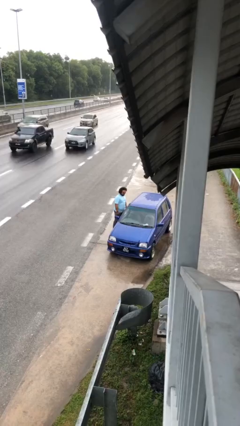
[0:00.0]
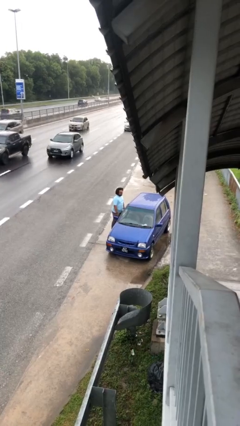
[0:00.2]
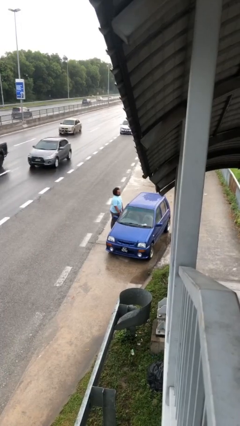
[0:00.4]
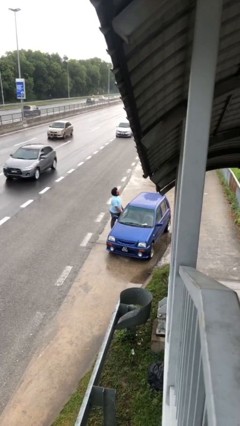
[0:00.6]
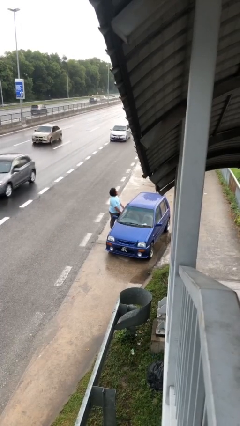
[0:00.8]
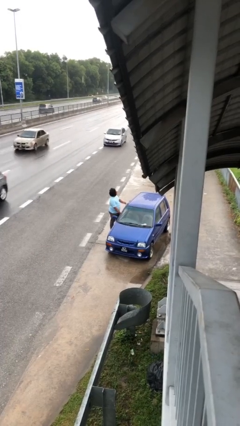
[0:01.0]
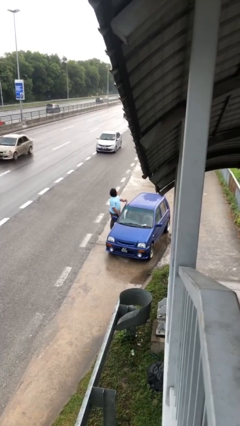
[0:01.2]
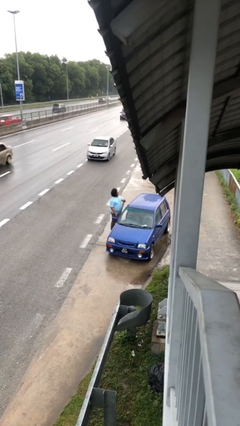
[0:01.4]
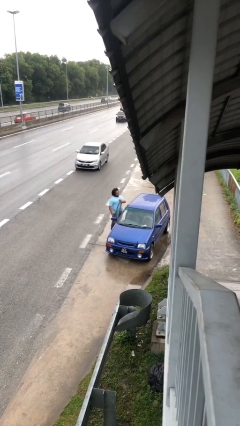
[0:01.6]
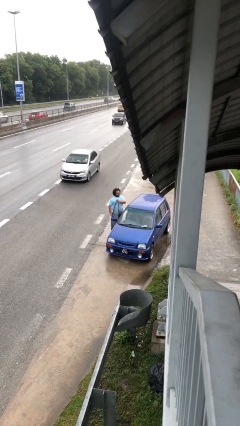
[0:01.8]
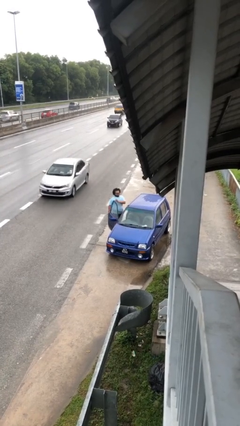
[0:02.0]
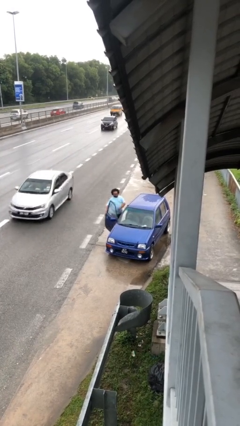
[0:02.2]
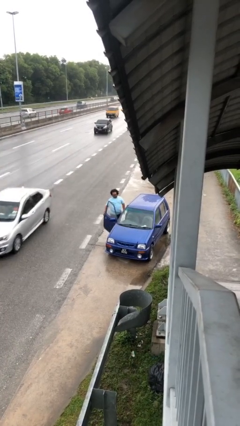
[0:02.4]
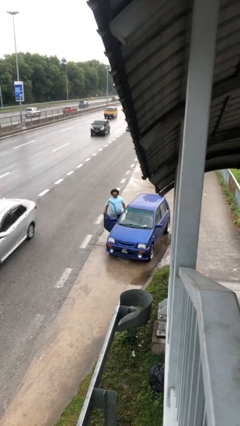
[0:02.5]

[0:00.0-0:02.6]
person opens car door

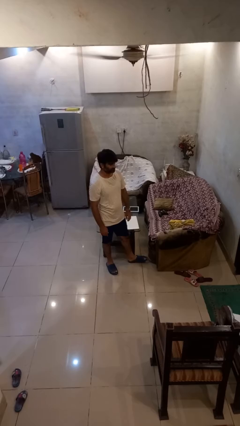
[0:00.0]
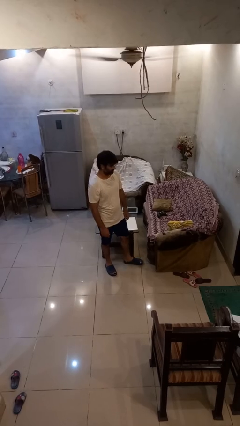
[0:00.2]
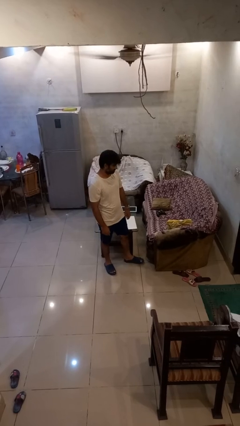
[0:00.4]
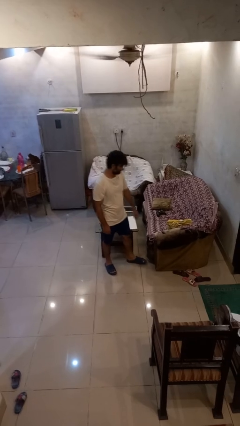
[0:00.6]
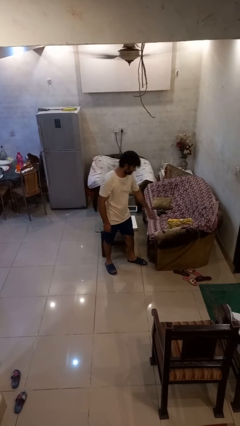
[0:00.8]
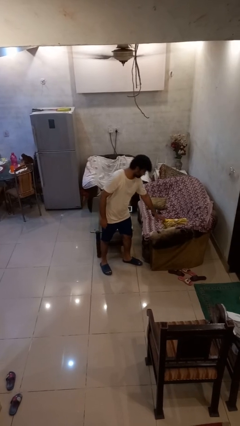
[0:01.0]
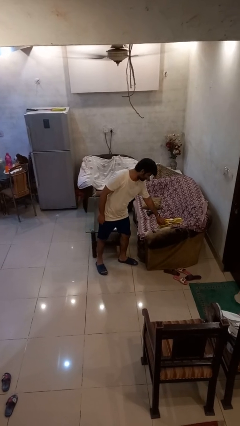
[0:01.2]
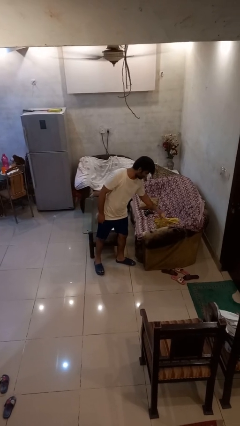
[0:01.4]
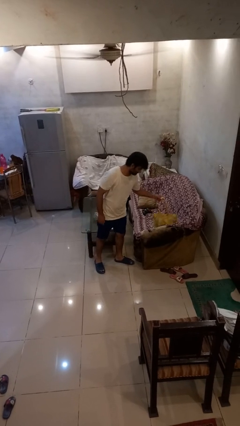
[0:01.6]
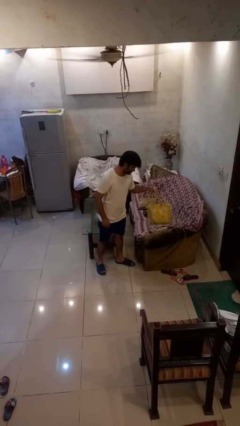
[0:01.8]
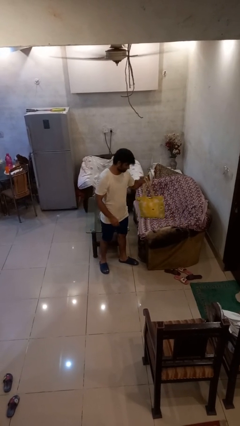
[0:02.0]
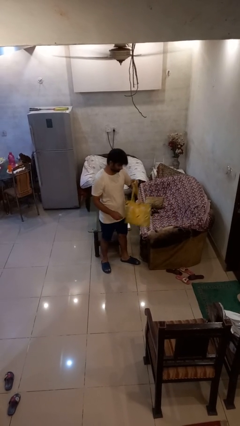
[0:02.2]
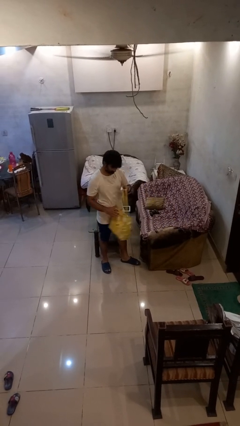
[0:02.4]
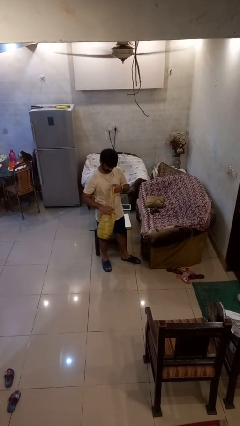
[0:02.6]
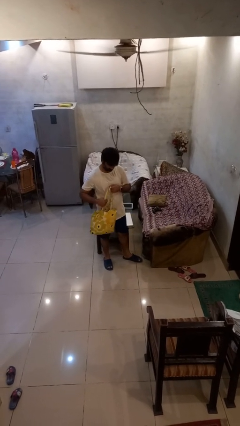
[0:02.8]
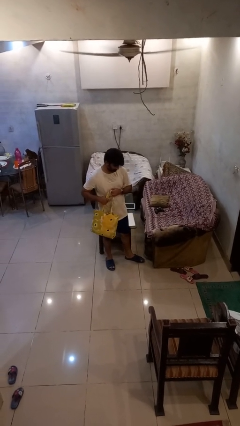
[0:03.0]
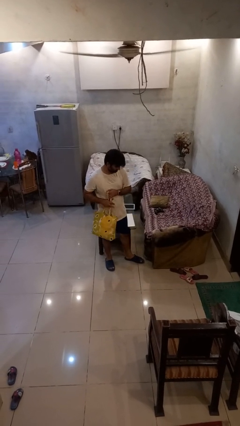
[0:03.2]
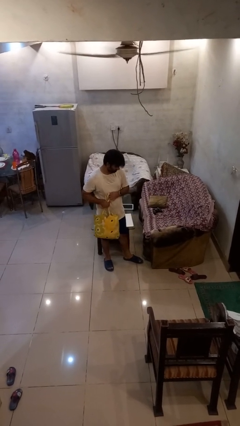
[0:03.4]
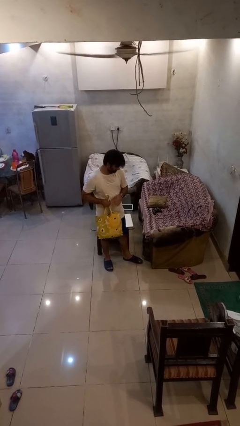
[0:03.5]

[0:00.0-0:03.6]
person picks up object from couch

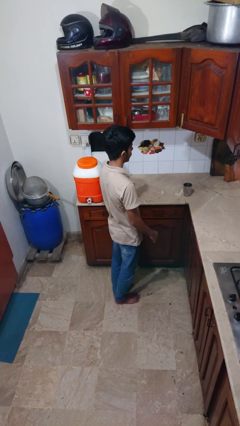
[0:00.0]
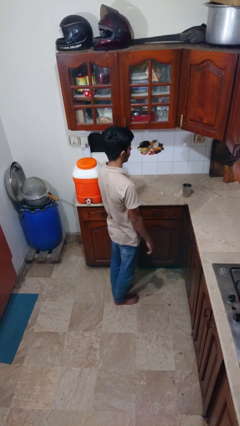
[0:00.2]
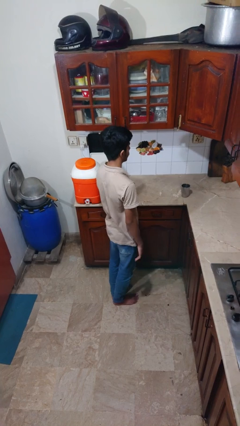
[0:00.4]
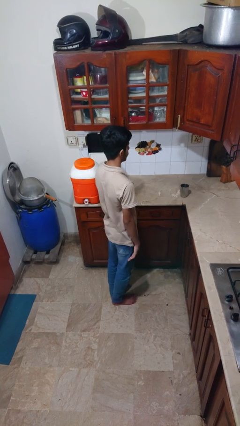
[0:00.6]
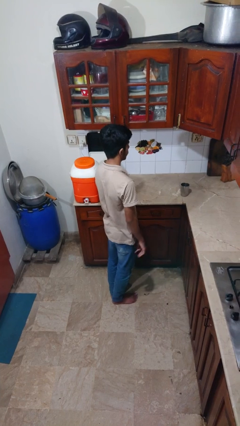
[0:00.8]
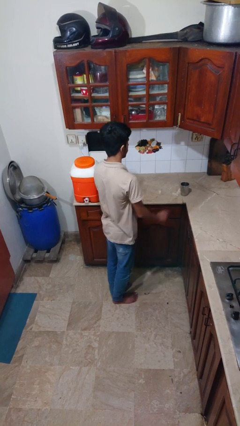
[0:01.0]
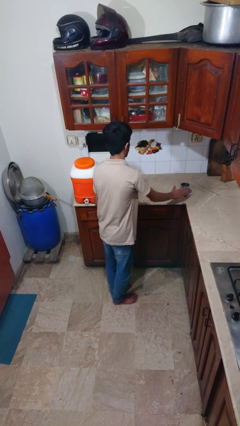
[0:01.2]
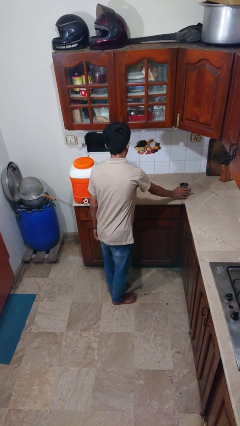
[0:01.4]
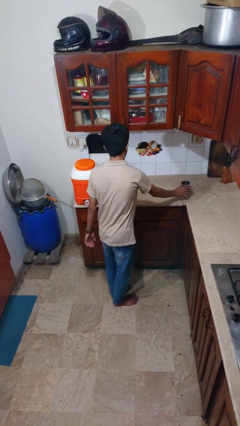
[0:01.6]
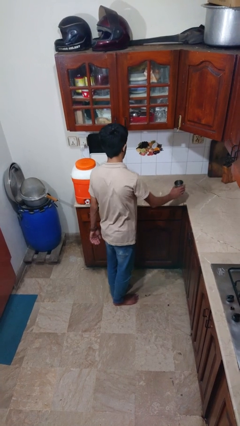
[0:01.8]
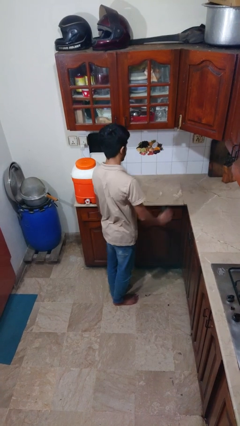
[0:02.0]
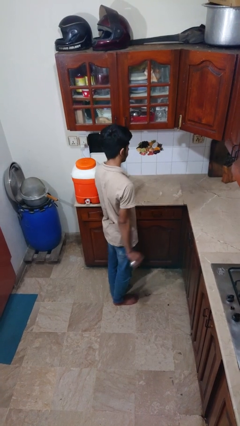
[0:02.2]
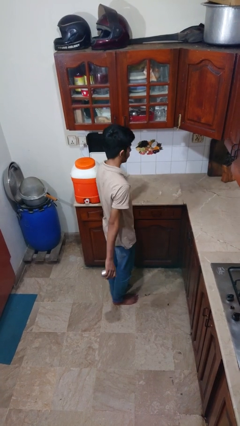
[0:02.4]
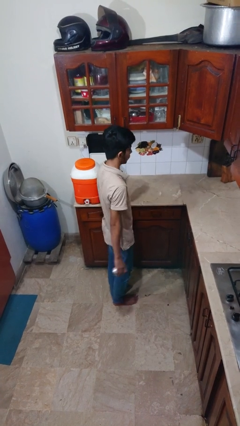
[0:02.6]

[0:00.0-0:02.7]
person picks up object from countertop

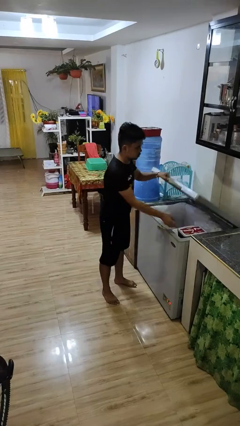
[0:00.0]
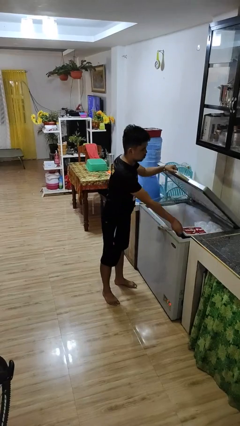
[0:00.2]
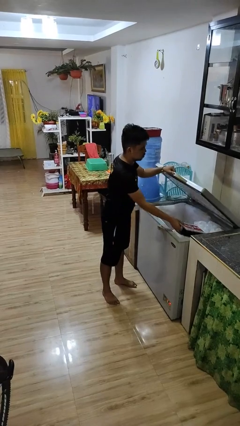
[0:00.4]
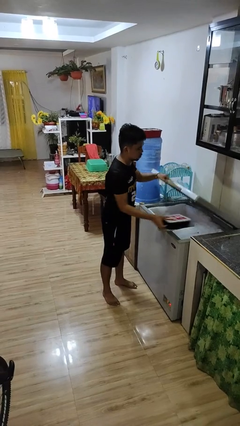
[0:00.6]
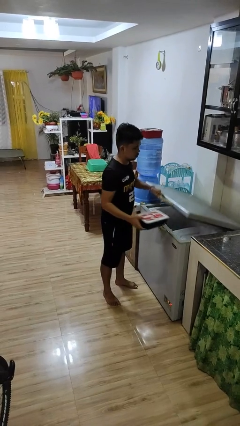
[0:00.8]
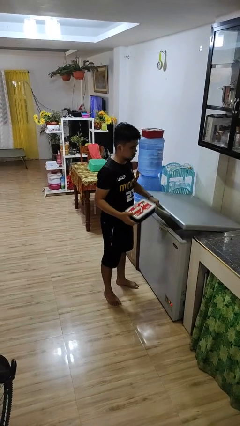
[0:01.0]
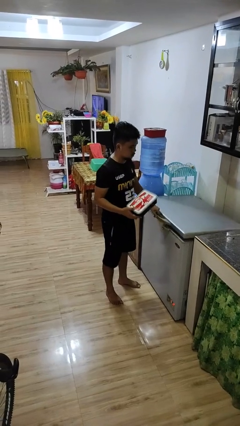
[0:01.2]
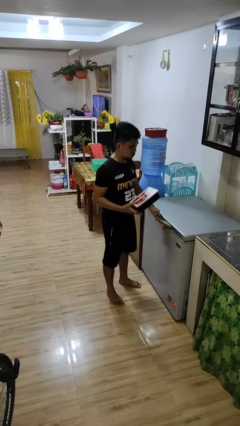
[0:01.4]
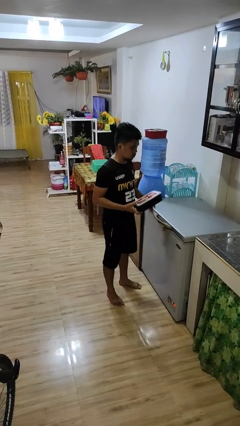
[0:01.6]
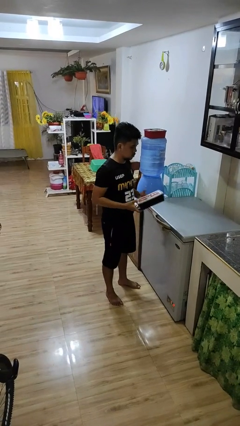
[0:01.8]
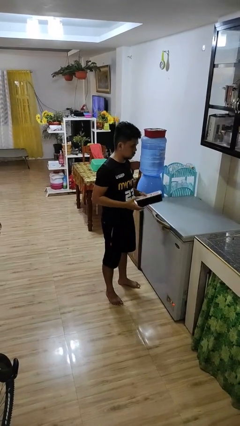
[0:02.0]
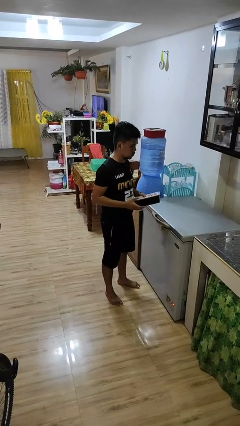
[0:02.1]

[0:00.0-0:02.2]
person takes object from refrigerator

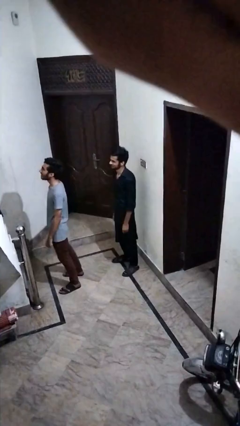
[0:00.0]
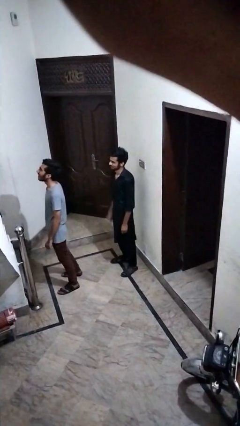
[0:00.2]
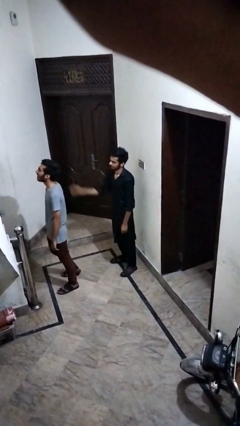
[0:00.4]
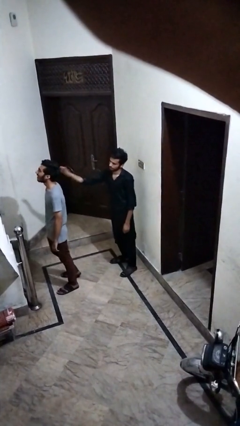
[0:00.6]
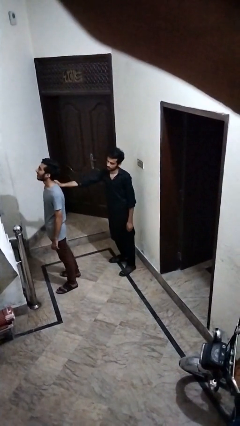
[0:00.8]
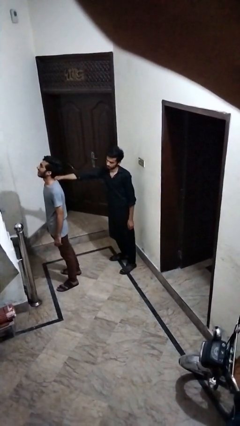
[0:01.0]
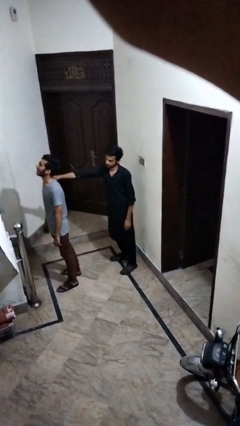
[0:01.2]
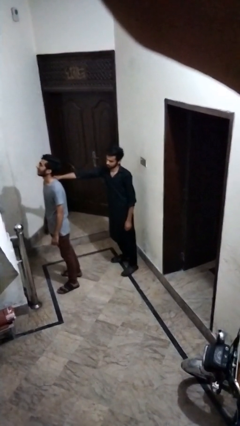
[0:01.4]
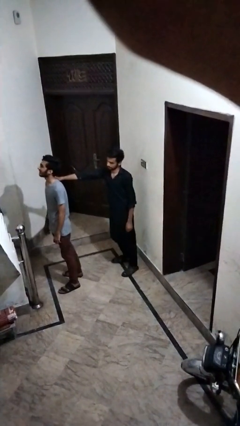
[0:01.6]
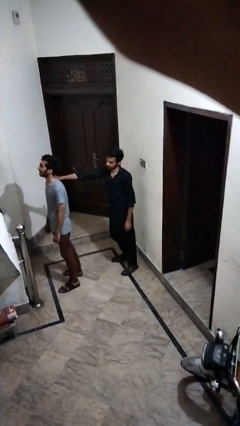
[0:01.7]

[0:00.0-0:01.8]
person grabs person by shoulder

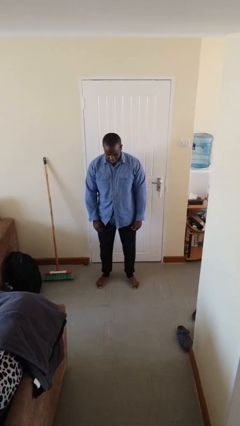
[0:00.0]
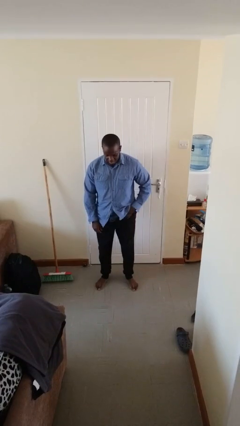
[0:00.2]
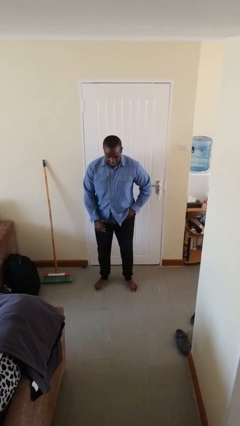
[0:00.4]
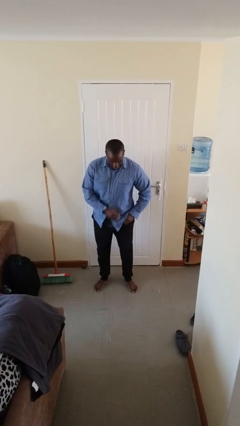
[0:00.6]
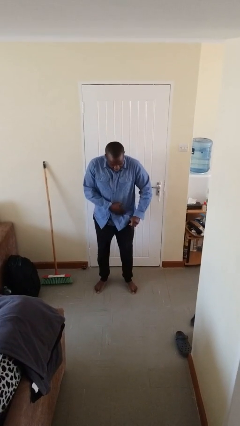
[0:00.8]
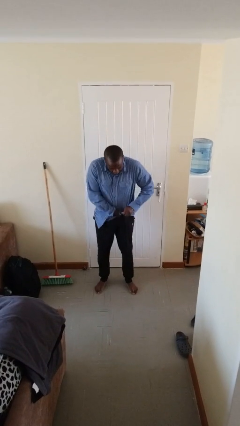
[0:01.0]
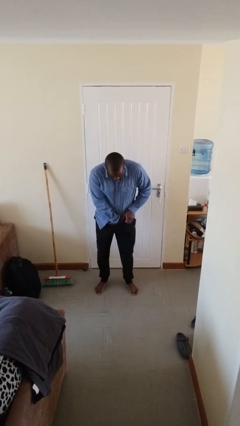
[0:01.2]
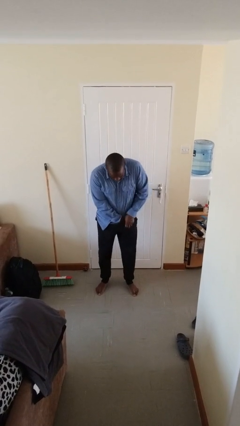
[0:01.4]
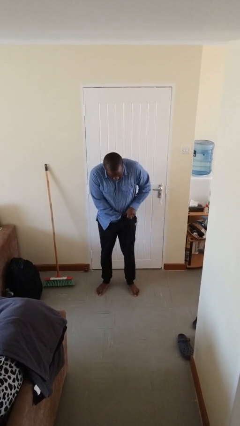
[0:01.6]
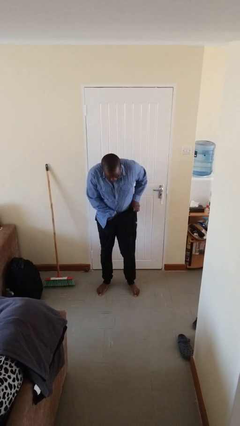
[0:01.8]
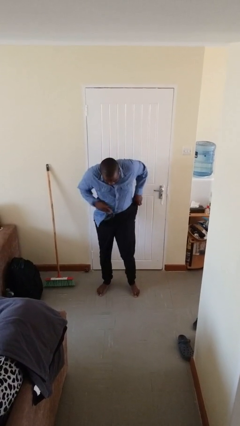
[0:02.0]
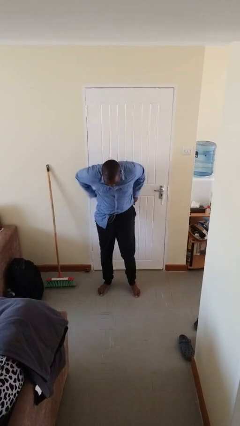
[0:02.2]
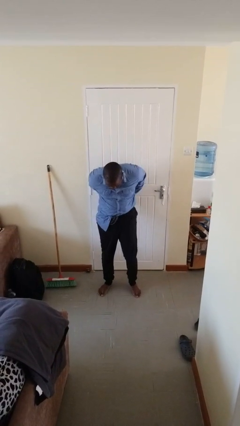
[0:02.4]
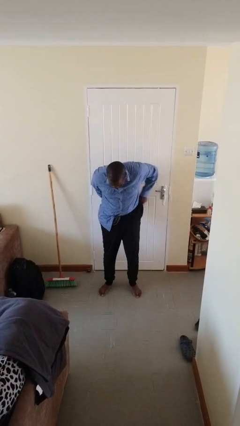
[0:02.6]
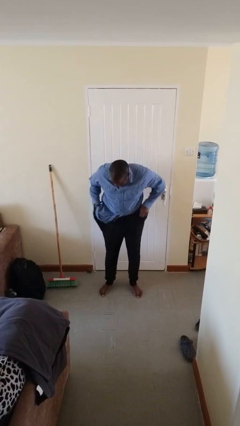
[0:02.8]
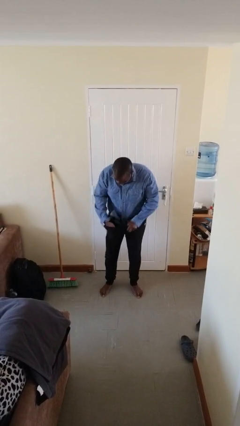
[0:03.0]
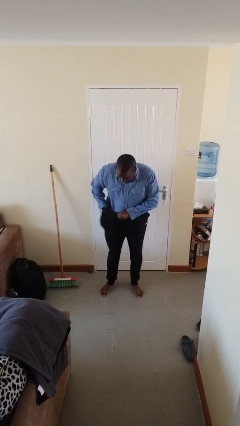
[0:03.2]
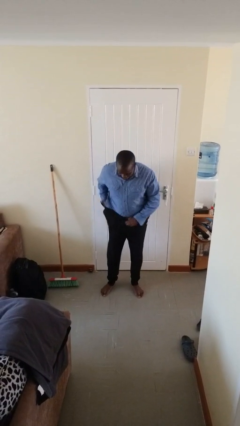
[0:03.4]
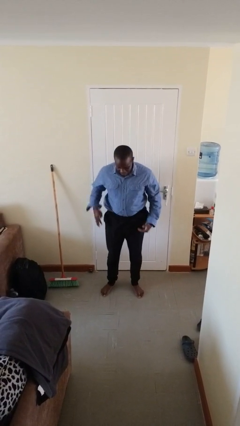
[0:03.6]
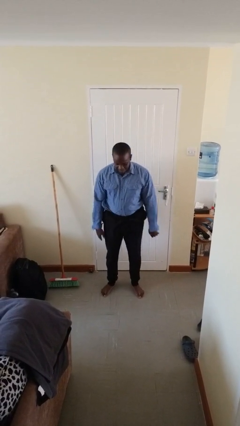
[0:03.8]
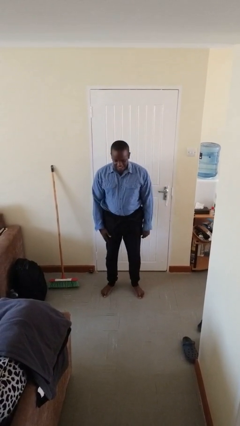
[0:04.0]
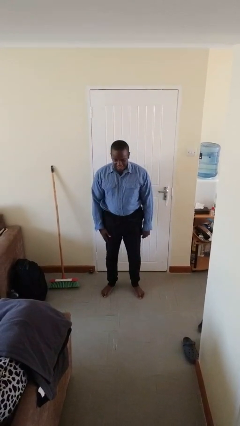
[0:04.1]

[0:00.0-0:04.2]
person tucks in shirt

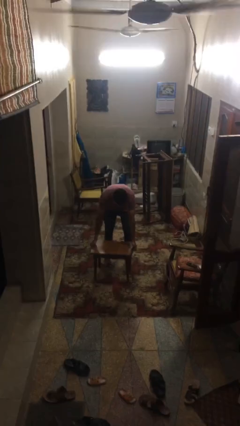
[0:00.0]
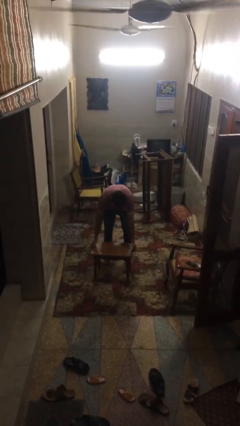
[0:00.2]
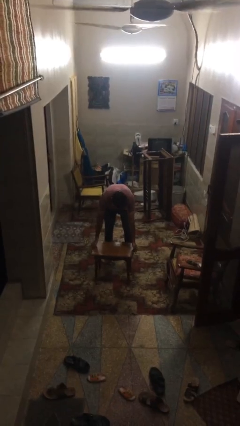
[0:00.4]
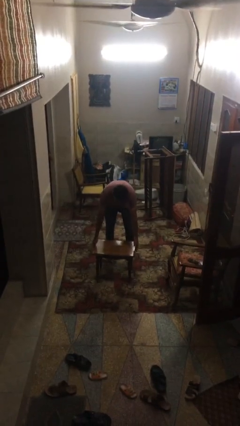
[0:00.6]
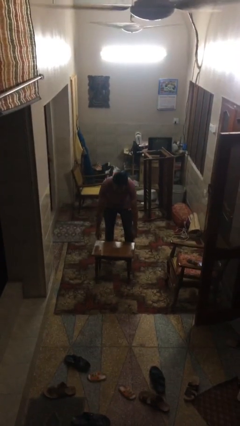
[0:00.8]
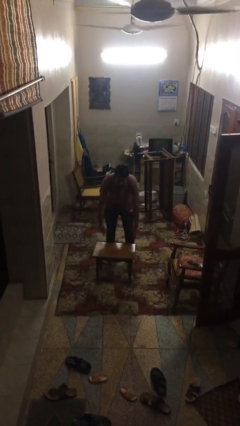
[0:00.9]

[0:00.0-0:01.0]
person puts down object on floor
